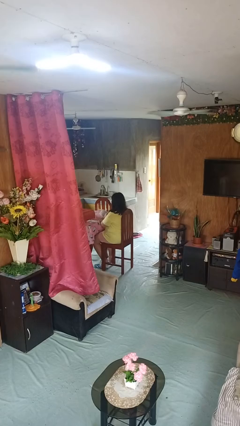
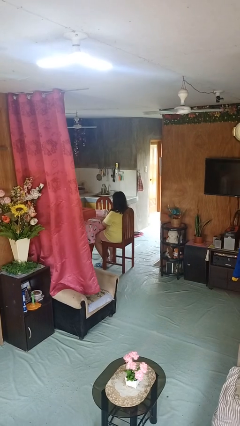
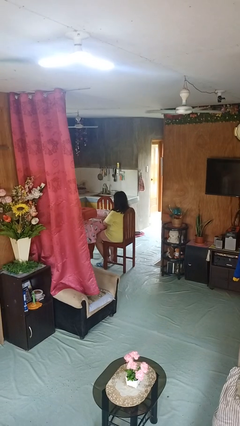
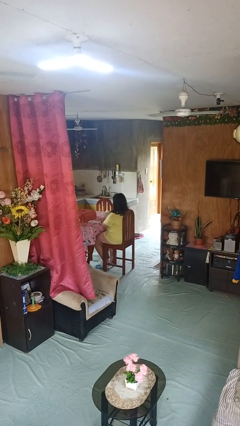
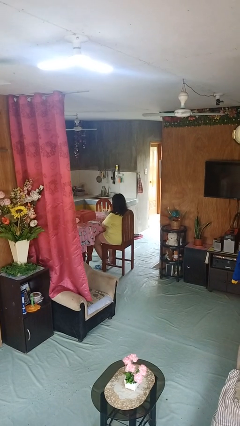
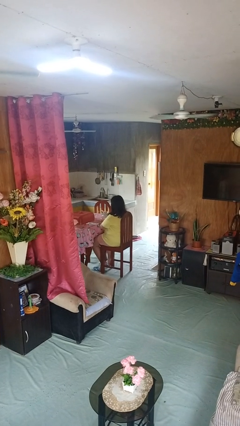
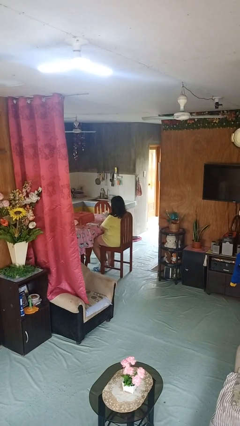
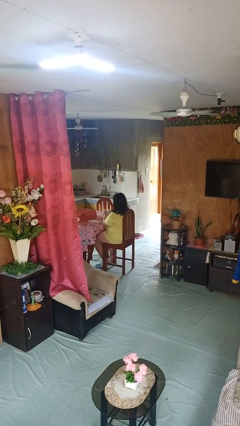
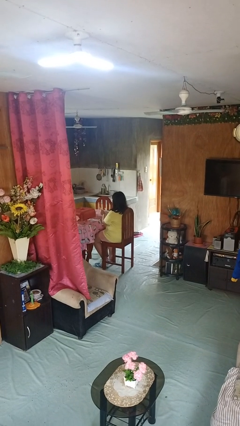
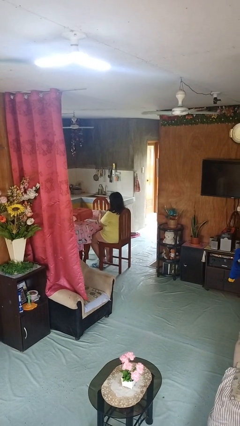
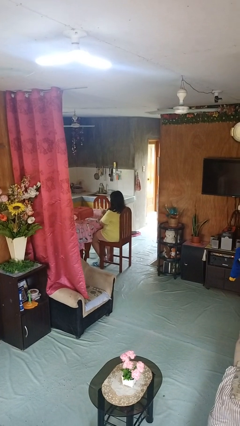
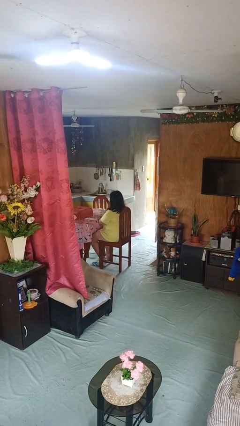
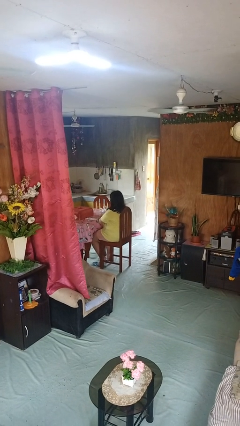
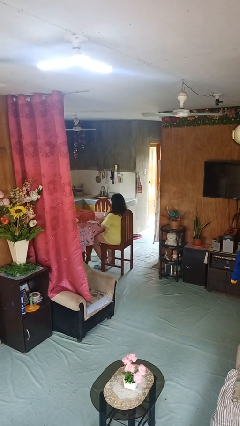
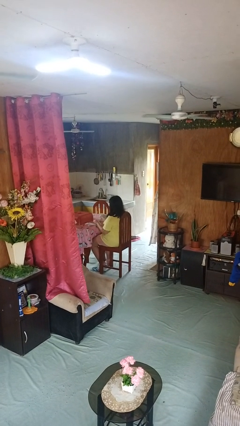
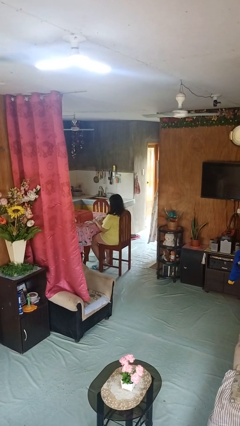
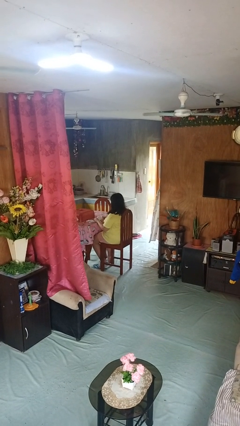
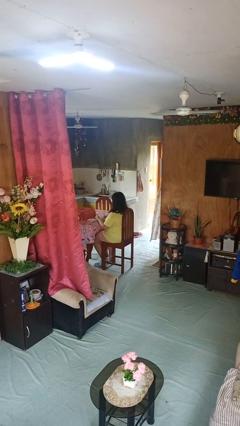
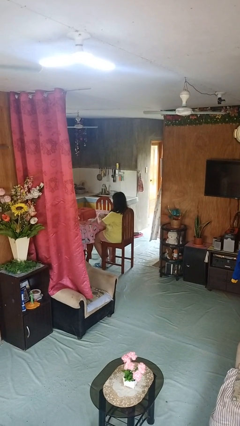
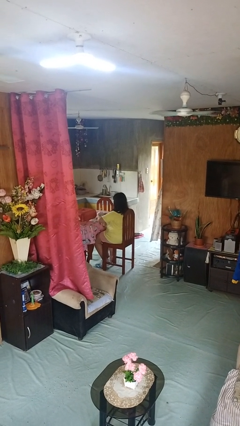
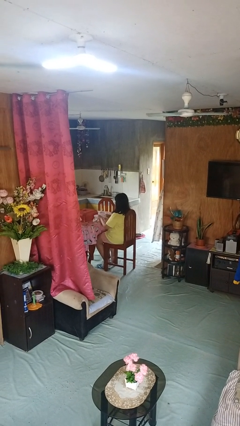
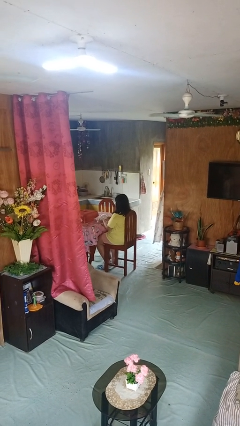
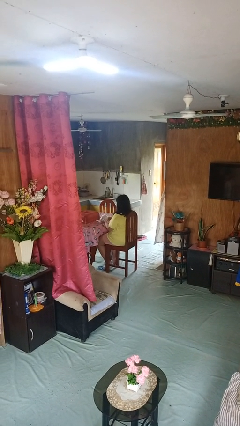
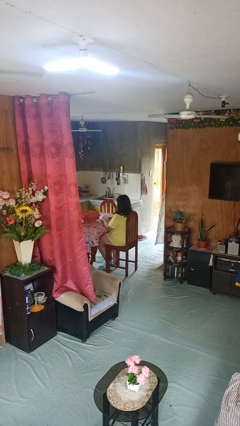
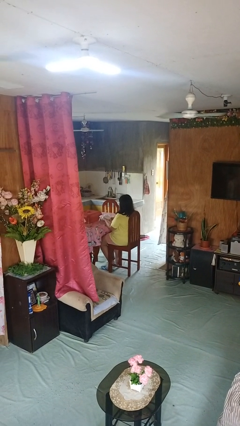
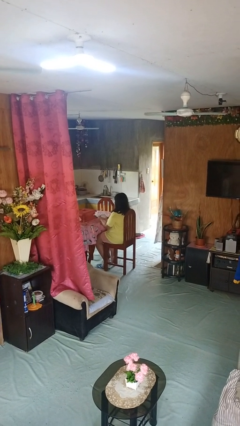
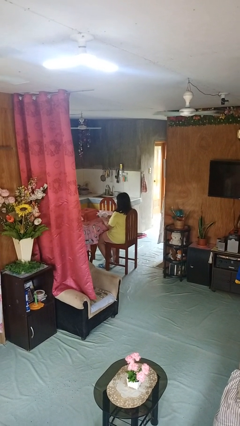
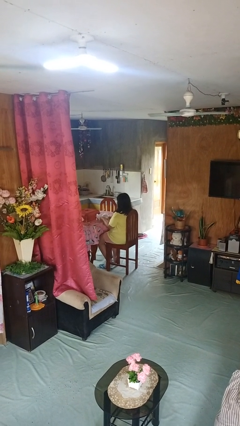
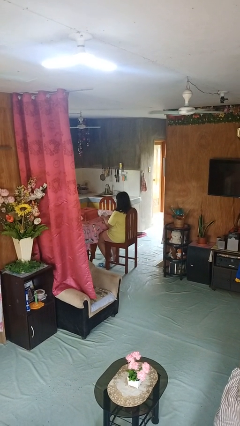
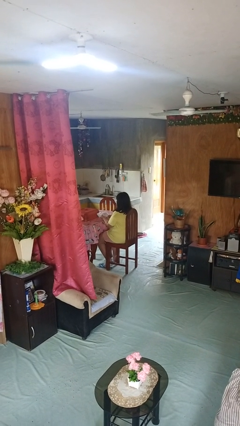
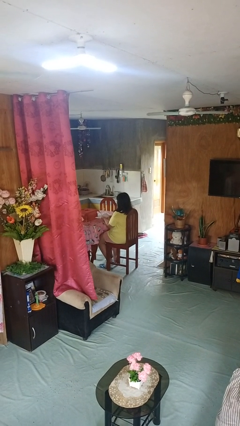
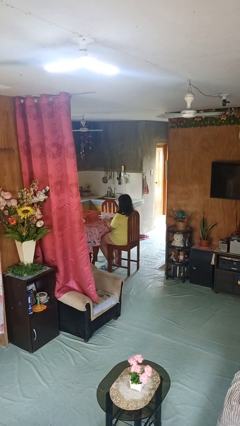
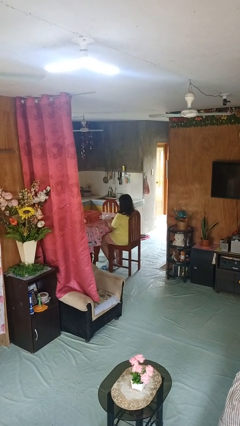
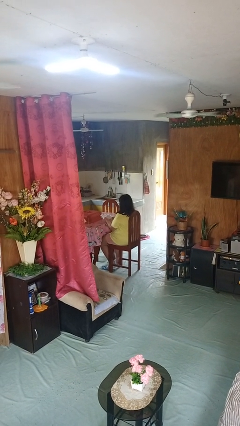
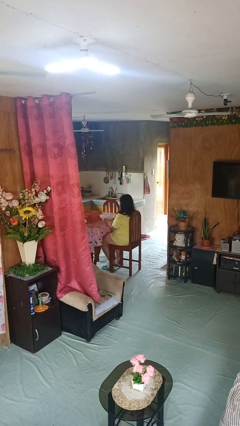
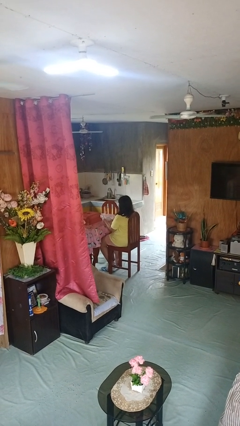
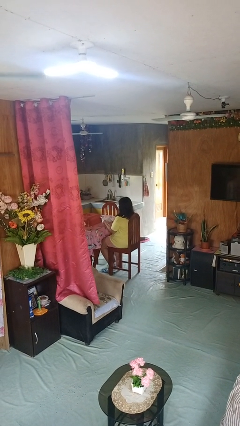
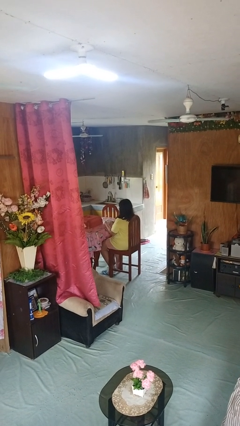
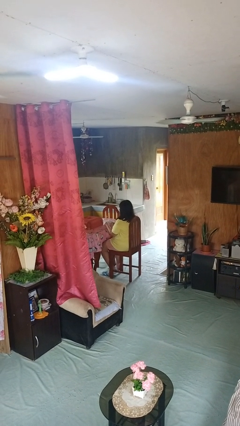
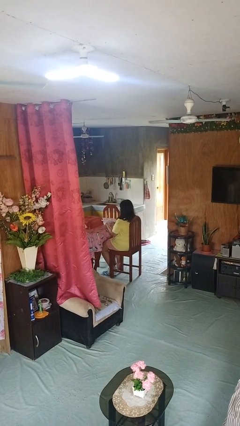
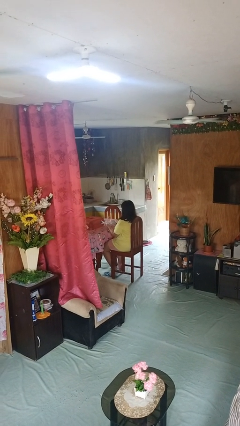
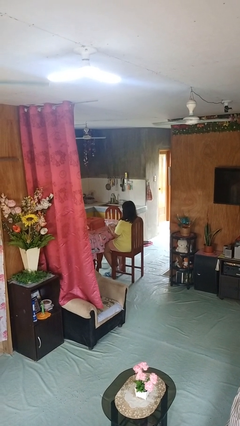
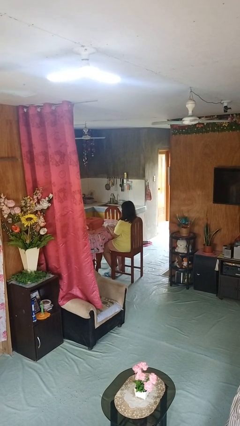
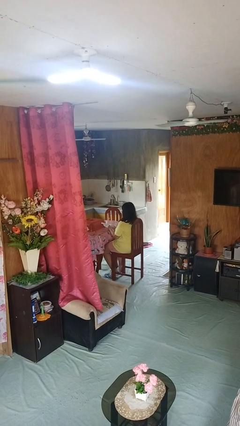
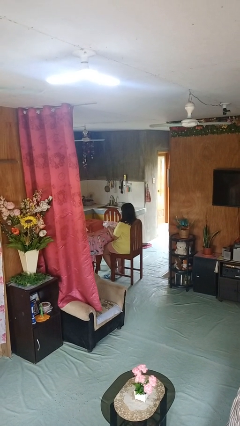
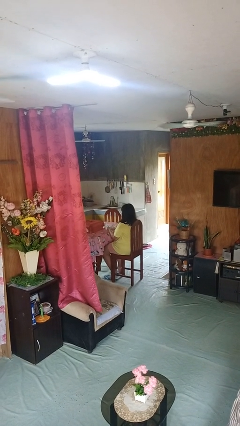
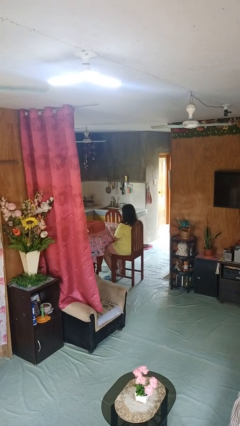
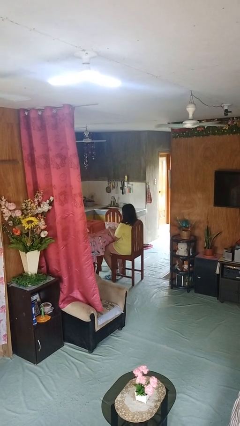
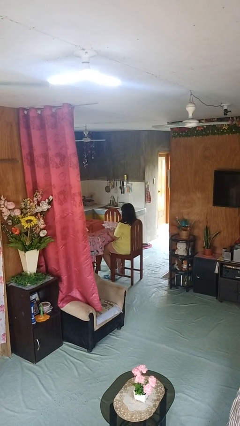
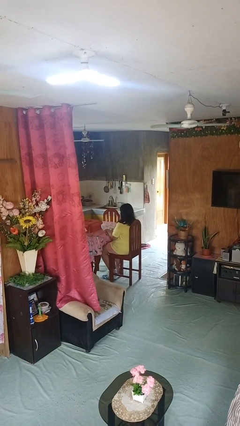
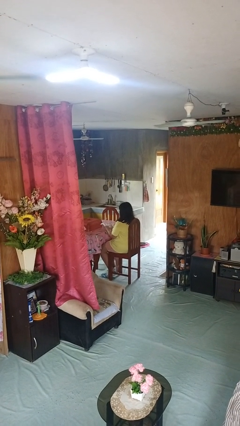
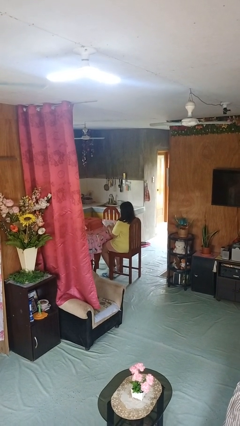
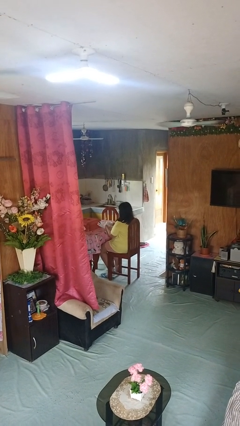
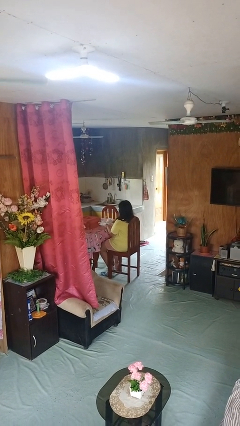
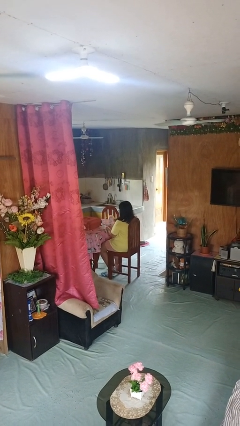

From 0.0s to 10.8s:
person puts on gloves

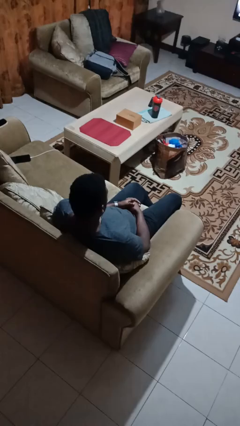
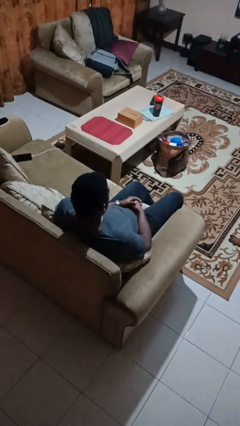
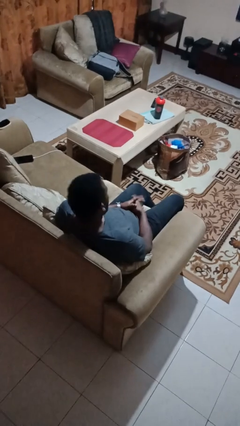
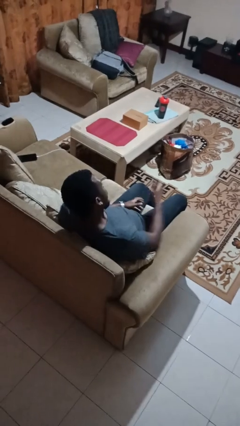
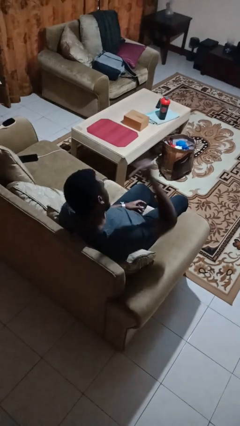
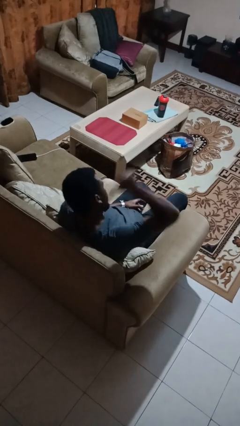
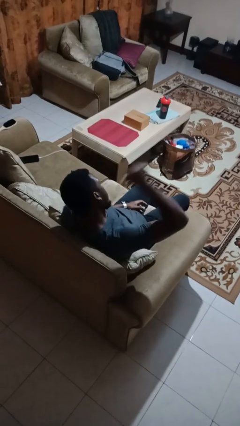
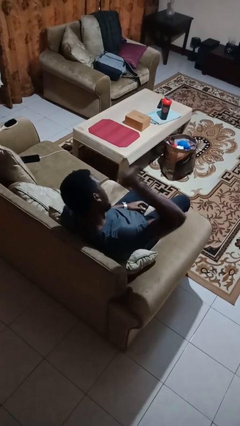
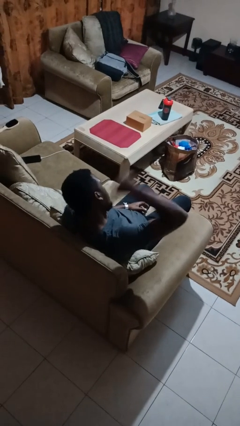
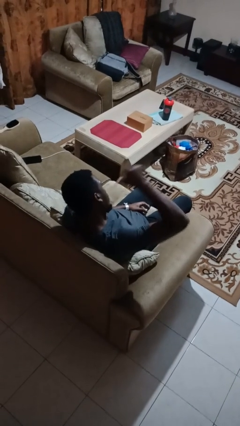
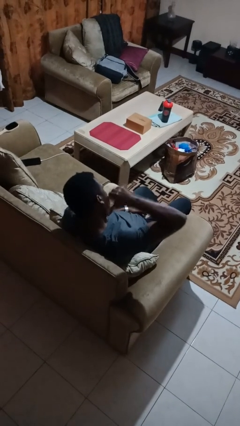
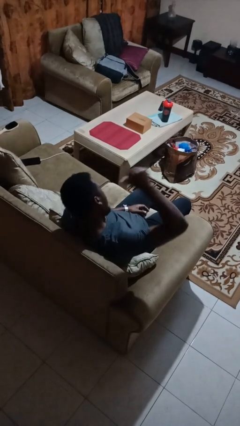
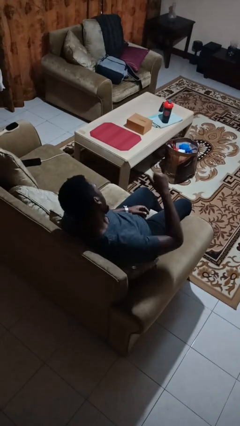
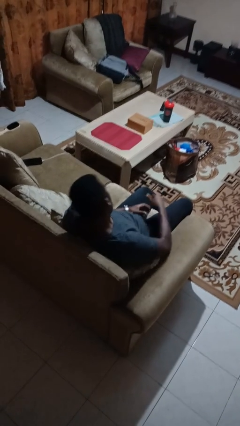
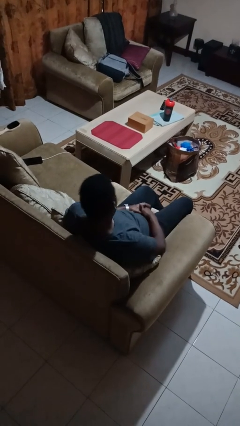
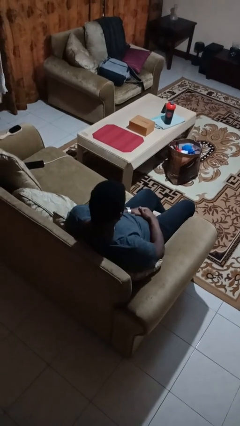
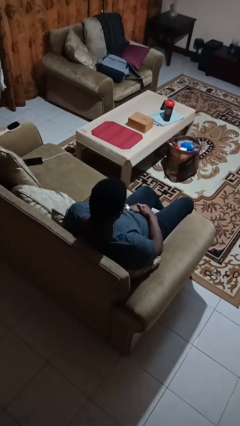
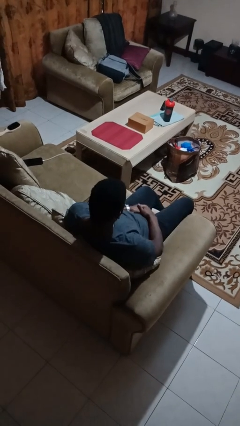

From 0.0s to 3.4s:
person gestures behind me

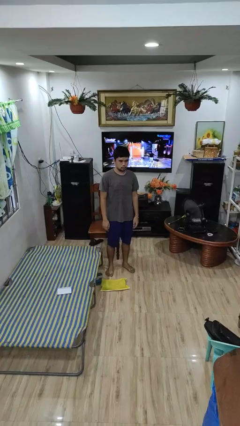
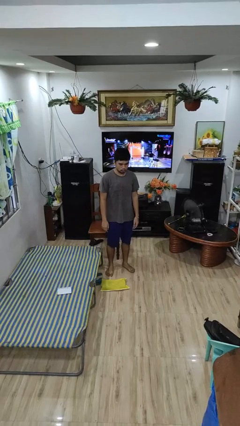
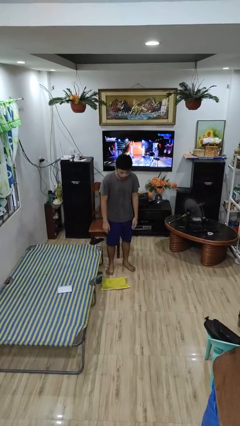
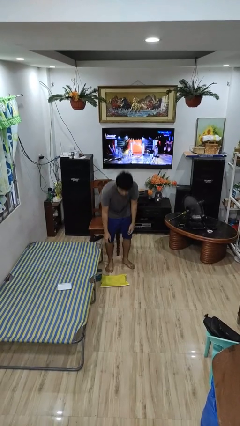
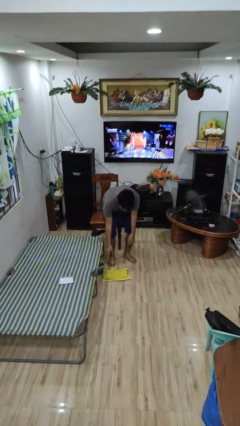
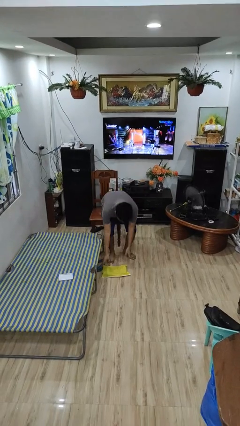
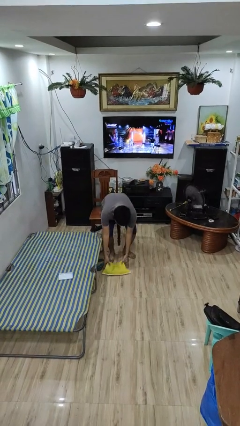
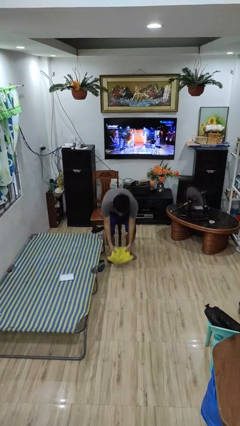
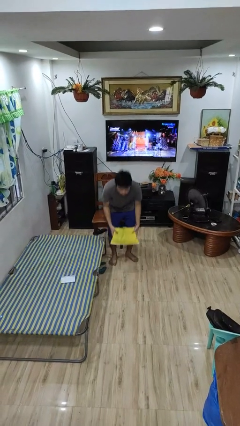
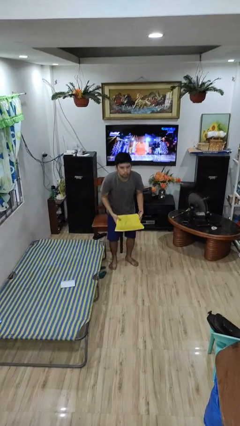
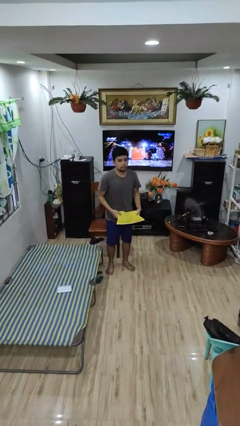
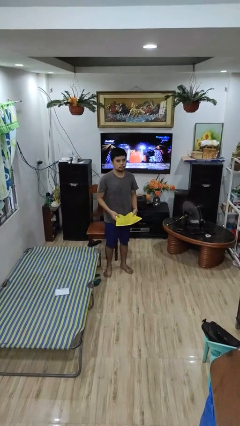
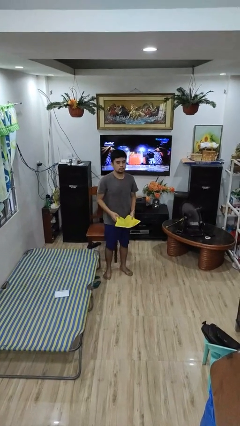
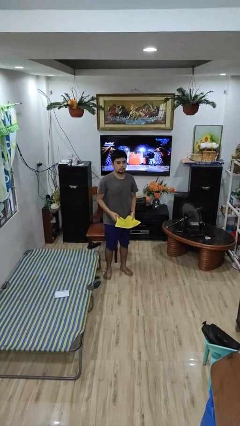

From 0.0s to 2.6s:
person picks up object from floor

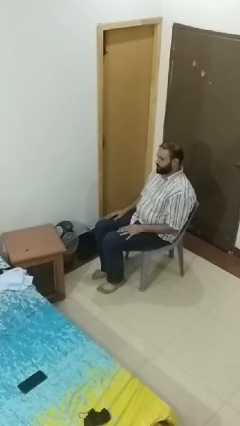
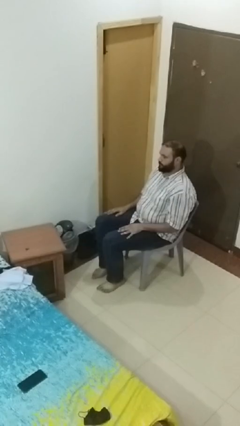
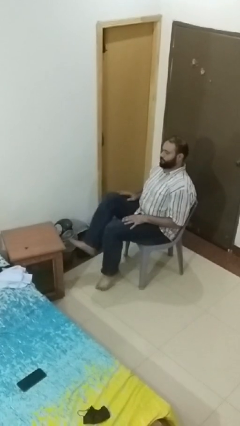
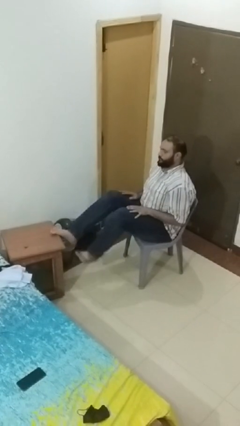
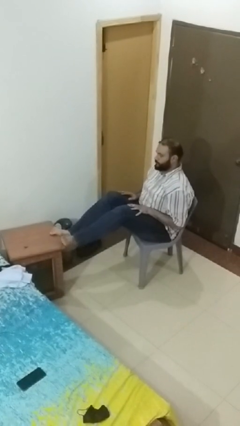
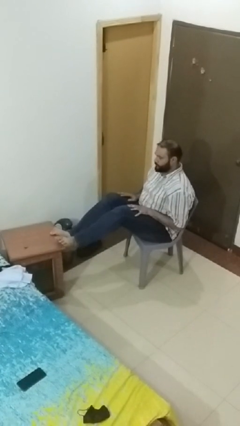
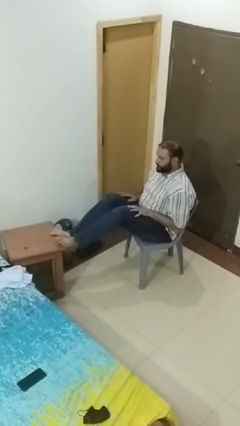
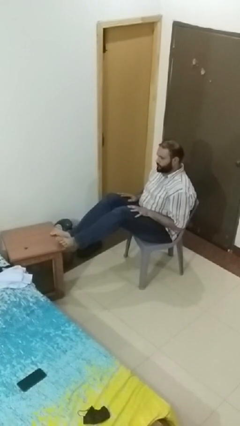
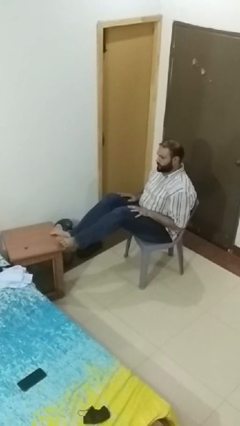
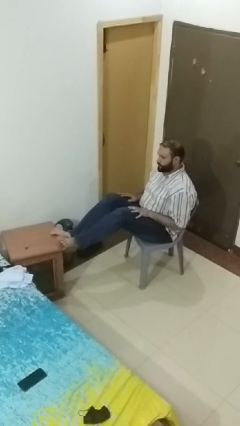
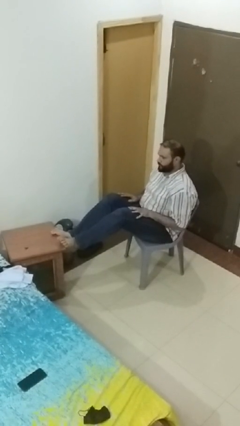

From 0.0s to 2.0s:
person puts feet up
